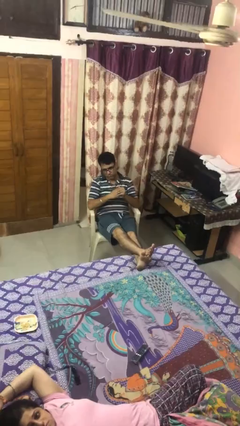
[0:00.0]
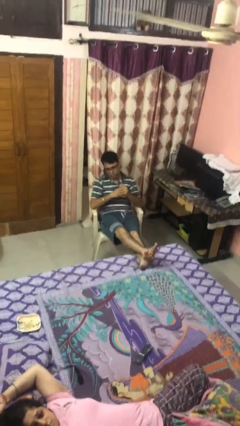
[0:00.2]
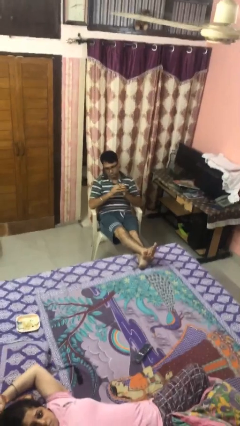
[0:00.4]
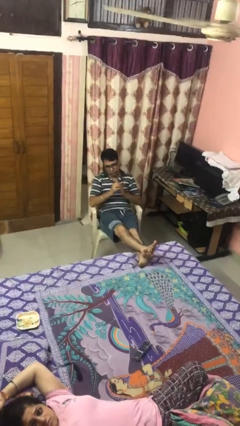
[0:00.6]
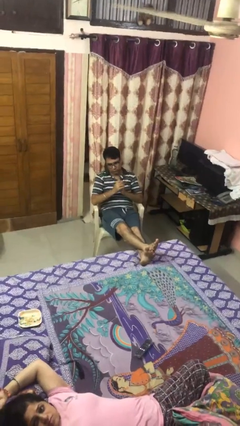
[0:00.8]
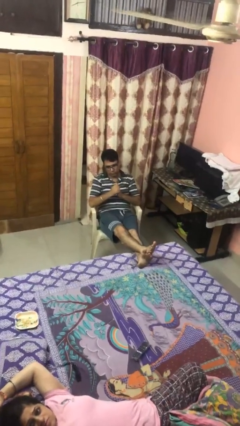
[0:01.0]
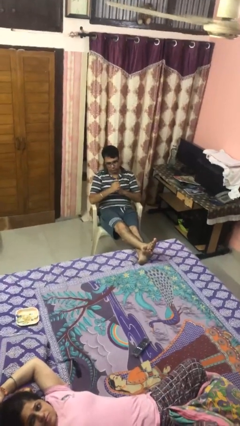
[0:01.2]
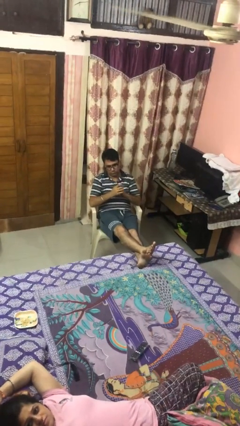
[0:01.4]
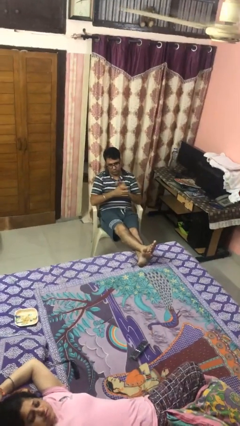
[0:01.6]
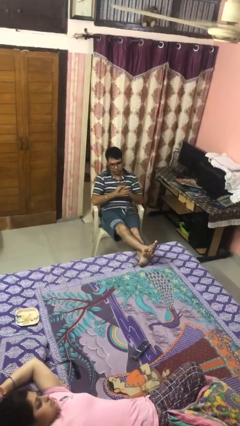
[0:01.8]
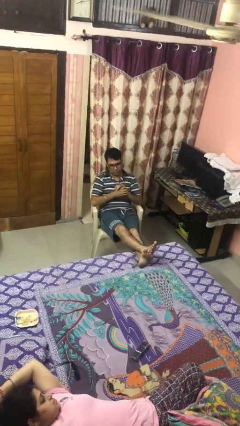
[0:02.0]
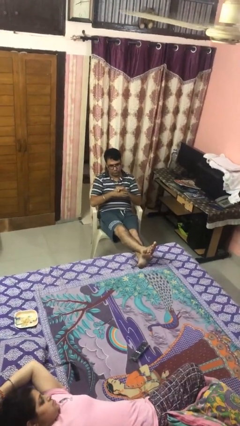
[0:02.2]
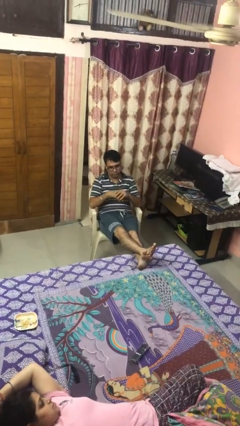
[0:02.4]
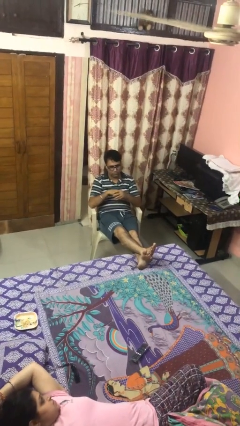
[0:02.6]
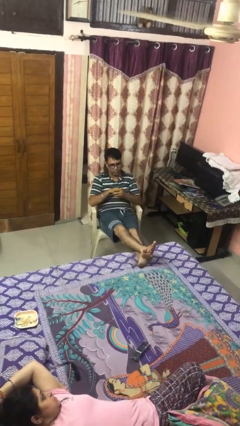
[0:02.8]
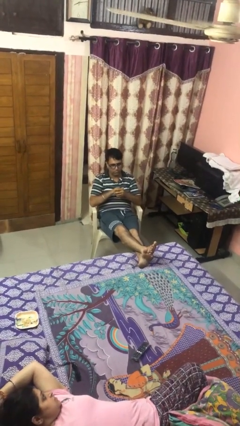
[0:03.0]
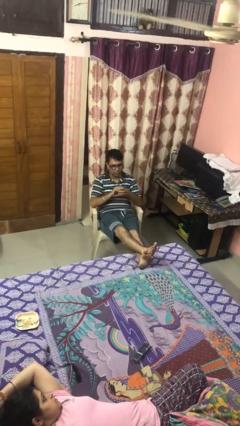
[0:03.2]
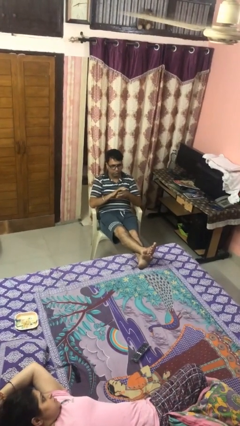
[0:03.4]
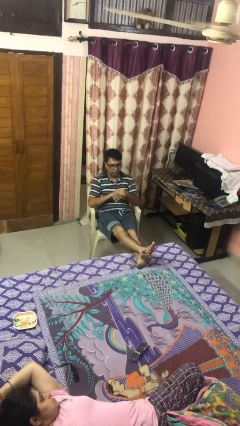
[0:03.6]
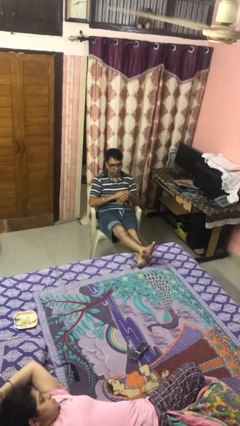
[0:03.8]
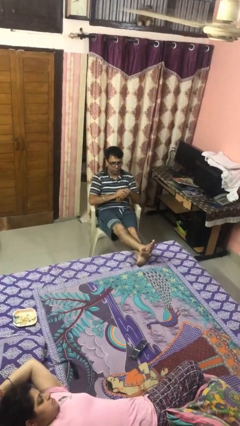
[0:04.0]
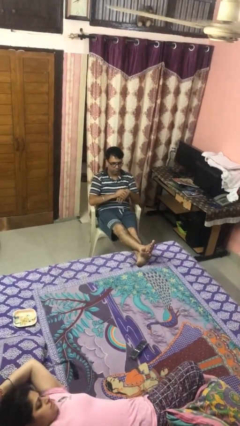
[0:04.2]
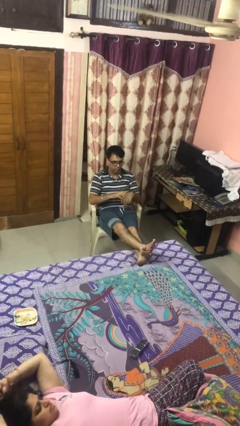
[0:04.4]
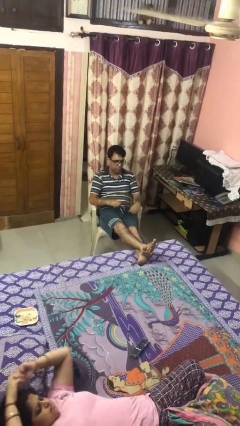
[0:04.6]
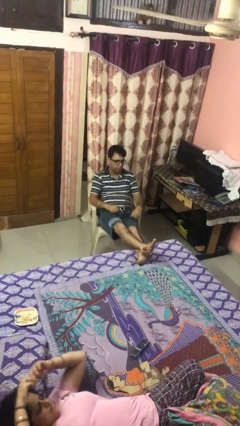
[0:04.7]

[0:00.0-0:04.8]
person cracks knuckles

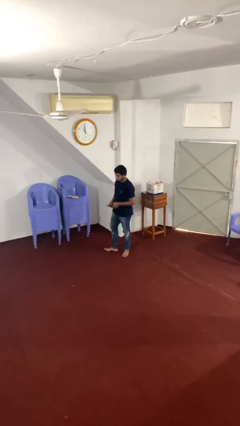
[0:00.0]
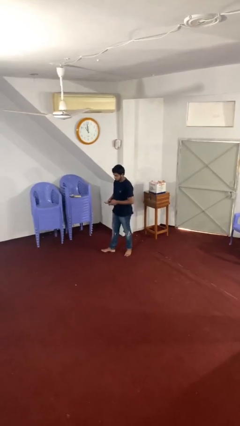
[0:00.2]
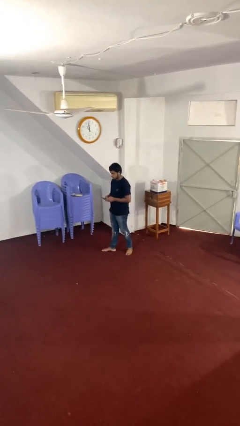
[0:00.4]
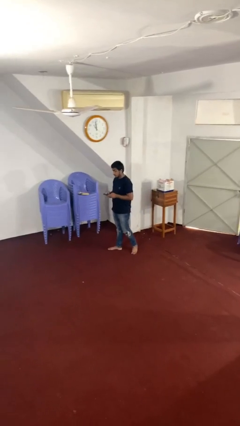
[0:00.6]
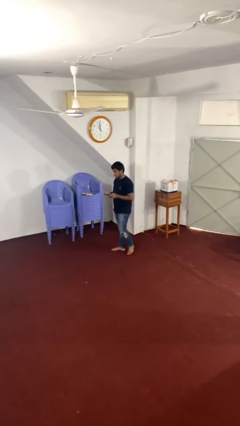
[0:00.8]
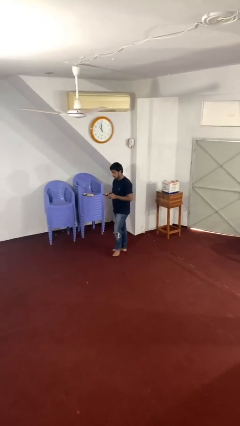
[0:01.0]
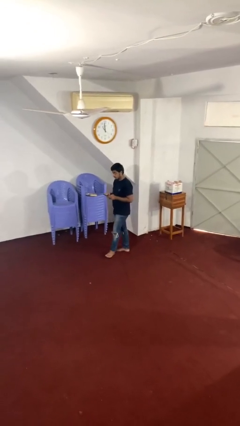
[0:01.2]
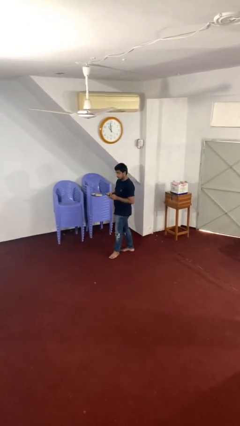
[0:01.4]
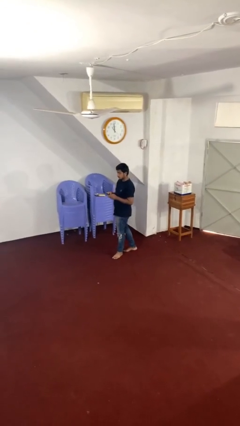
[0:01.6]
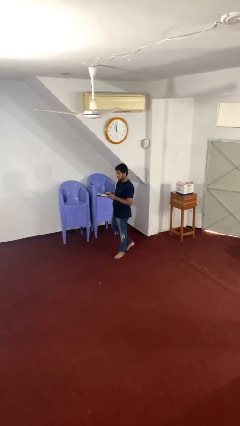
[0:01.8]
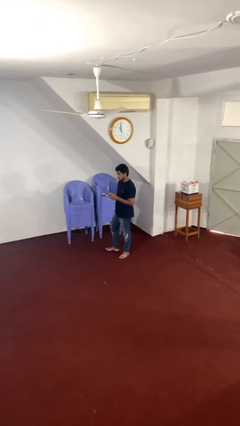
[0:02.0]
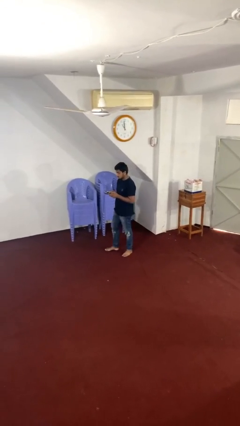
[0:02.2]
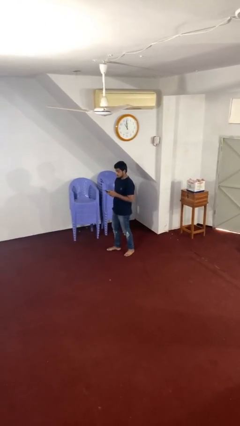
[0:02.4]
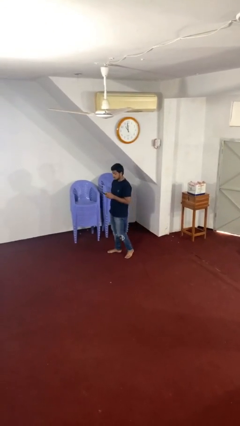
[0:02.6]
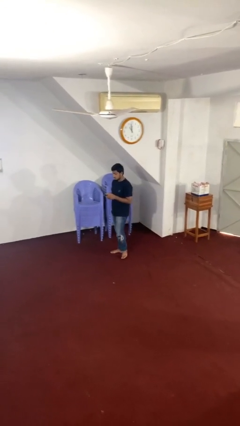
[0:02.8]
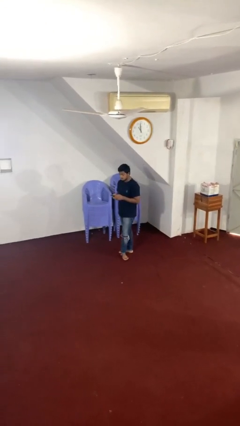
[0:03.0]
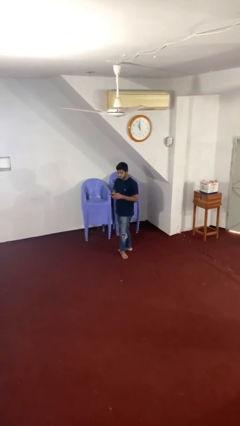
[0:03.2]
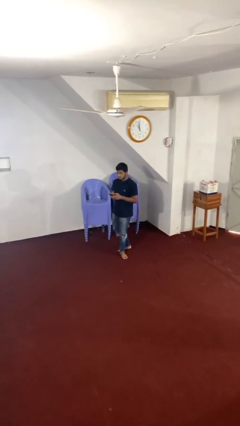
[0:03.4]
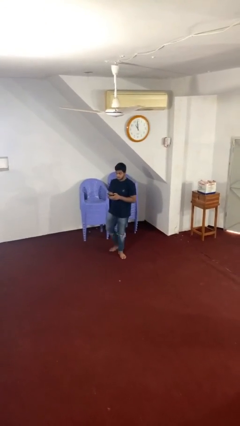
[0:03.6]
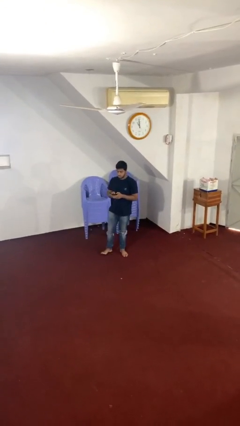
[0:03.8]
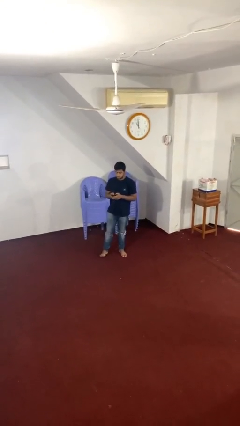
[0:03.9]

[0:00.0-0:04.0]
person texts on phone

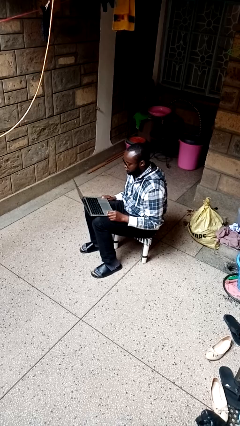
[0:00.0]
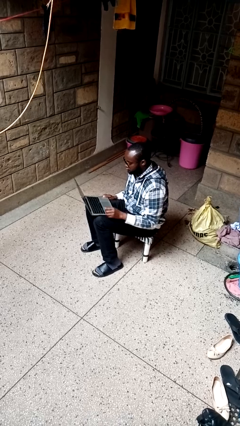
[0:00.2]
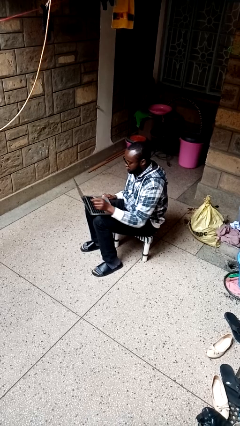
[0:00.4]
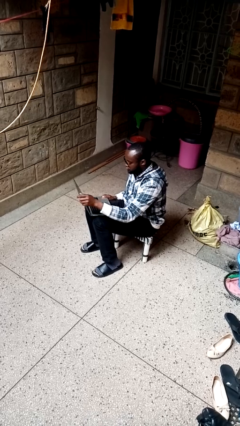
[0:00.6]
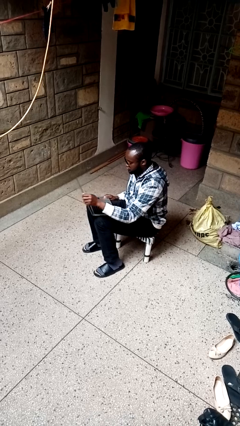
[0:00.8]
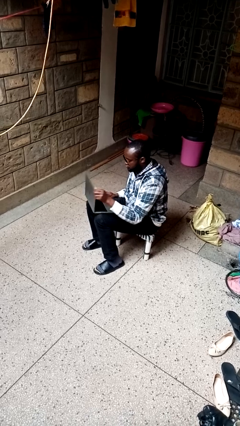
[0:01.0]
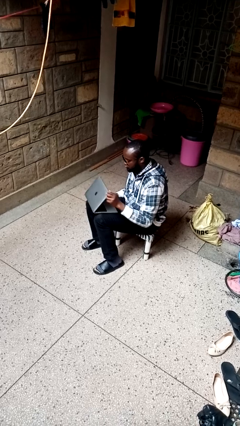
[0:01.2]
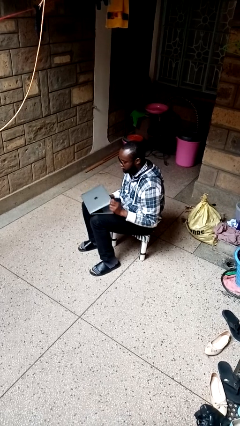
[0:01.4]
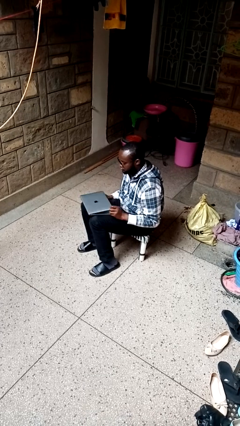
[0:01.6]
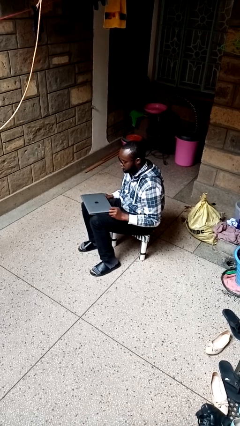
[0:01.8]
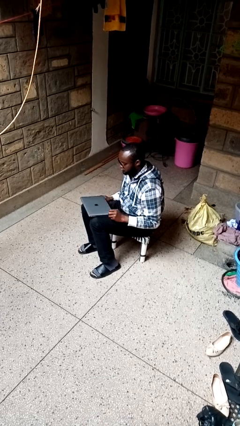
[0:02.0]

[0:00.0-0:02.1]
person closes laptop

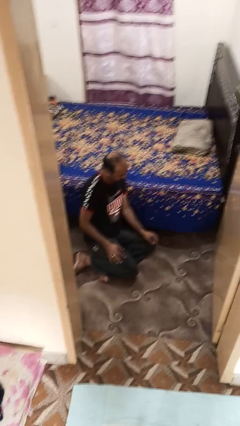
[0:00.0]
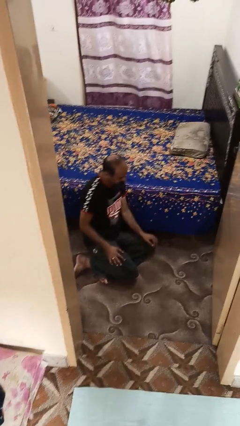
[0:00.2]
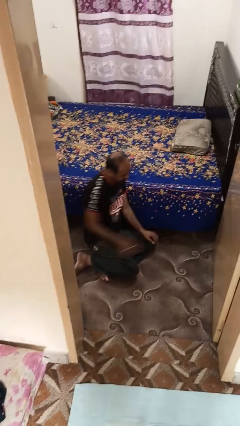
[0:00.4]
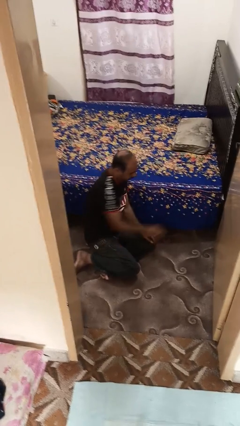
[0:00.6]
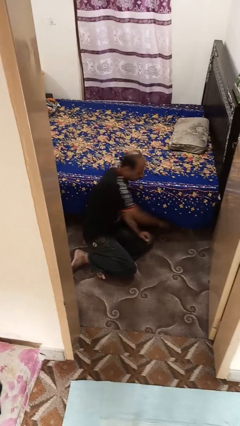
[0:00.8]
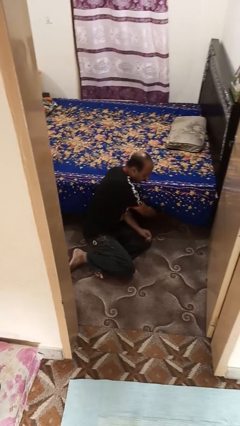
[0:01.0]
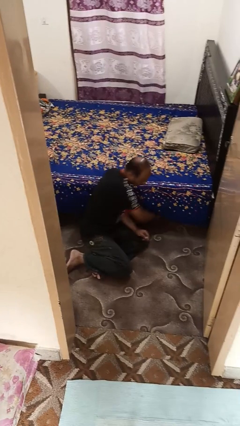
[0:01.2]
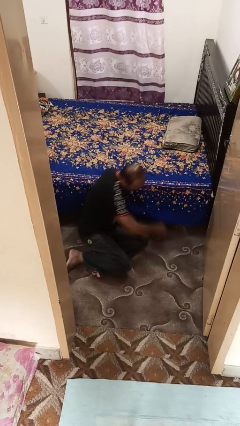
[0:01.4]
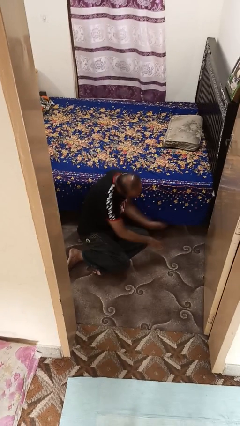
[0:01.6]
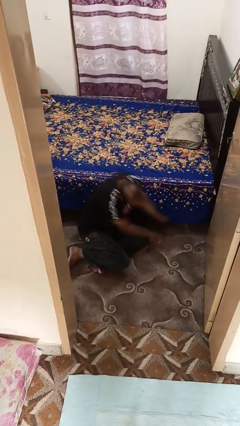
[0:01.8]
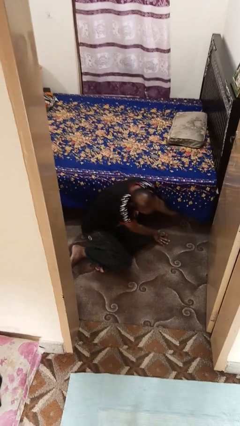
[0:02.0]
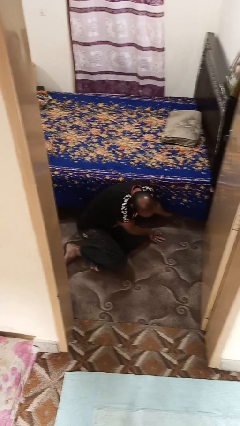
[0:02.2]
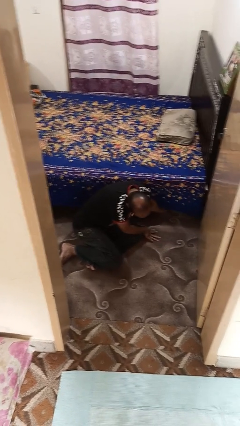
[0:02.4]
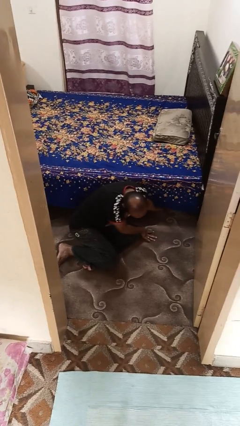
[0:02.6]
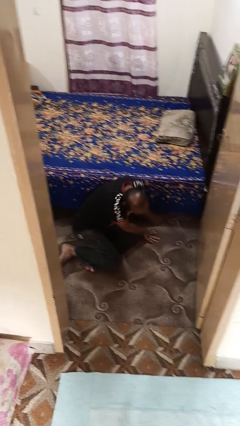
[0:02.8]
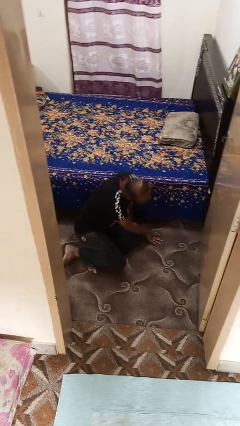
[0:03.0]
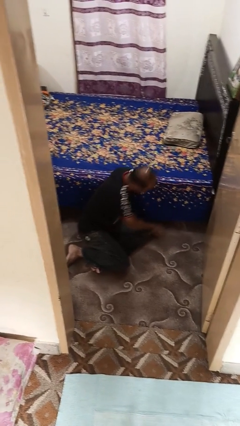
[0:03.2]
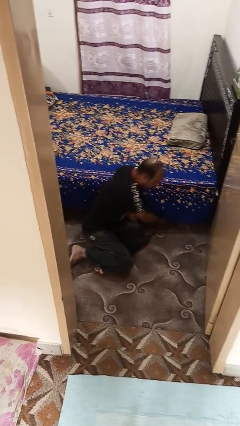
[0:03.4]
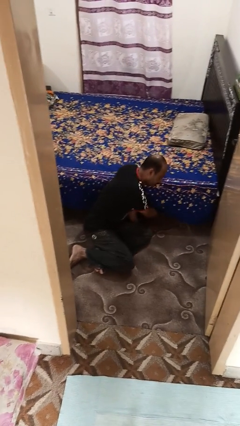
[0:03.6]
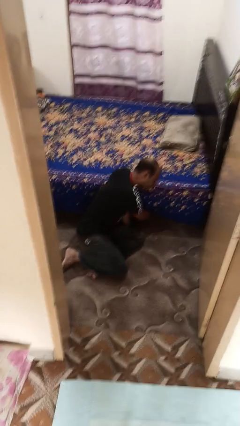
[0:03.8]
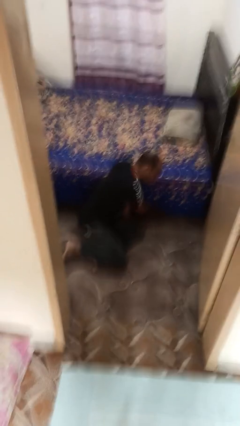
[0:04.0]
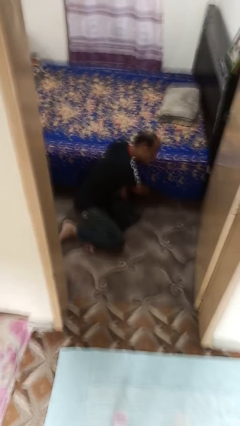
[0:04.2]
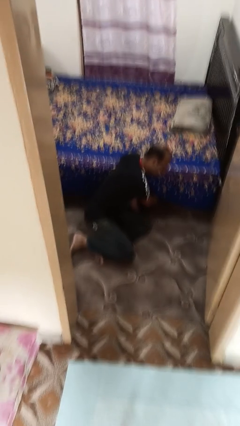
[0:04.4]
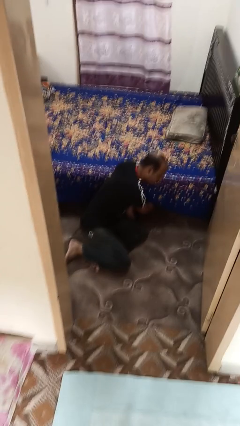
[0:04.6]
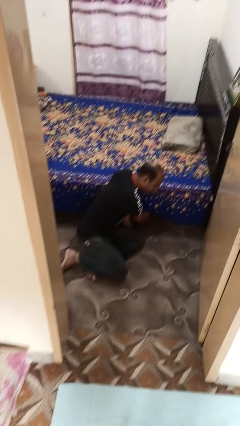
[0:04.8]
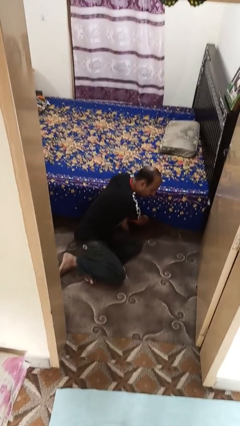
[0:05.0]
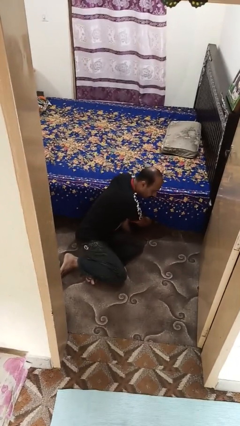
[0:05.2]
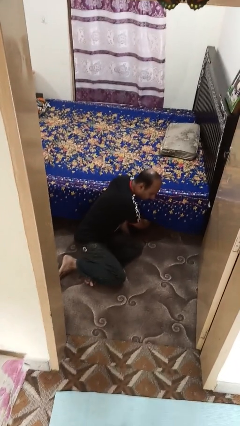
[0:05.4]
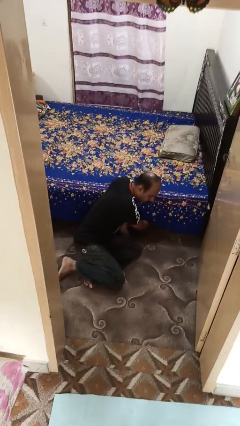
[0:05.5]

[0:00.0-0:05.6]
person searches under bed

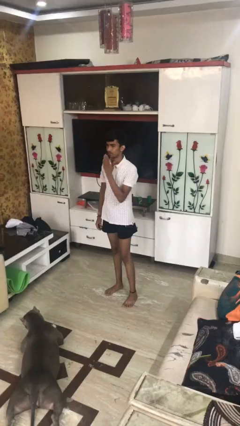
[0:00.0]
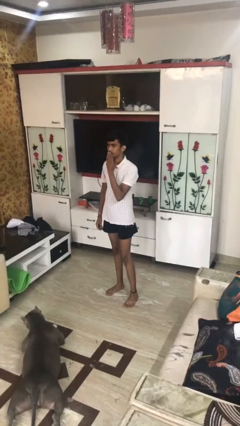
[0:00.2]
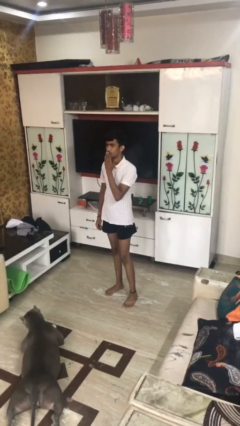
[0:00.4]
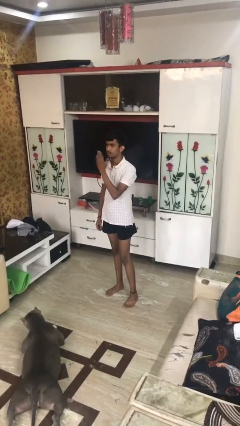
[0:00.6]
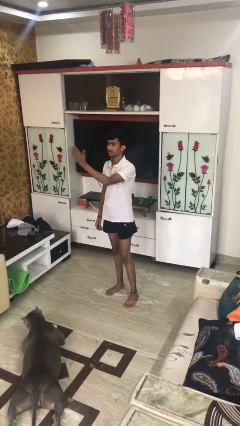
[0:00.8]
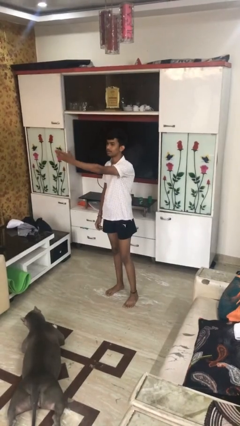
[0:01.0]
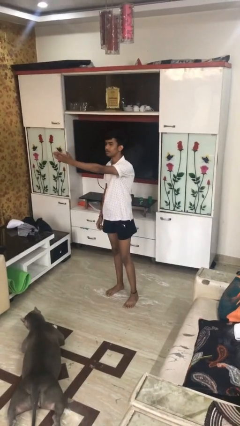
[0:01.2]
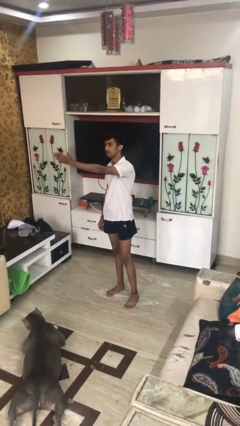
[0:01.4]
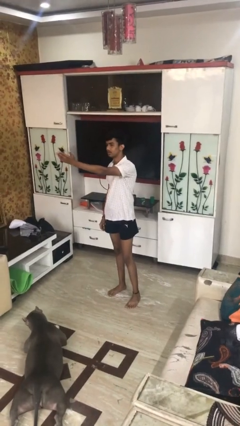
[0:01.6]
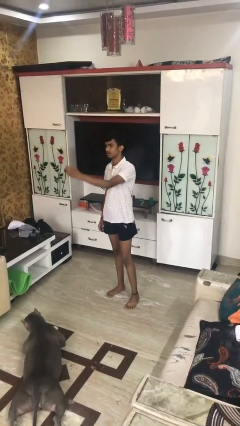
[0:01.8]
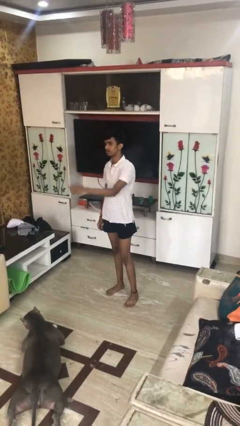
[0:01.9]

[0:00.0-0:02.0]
person gestures blow kiss
